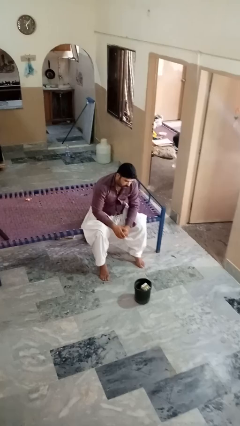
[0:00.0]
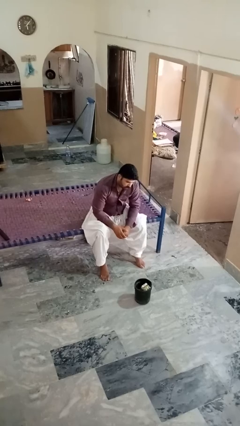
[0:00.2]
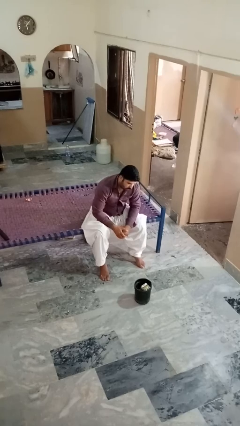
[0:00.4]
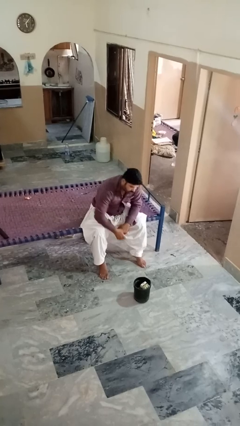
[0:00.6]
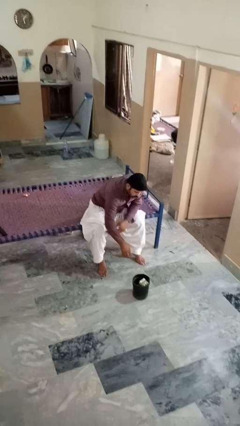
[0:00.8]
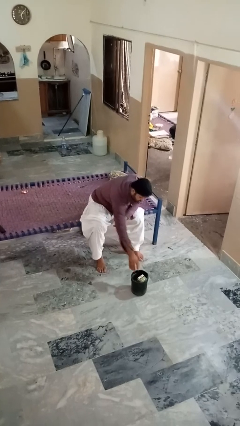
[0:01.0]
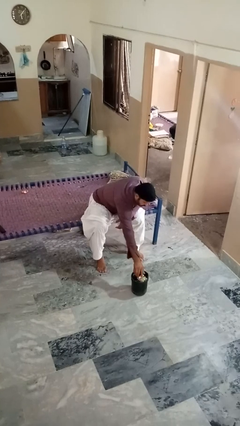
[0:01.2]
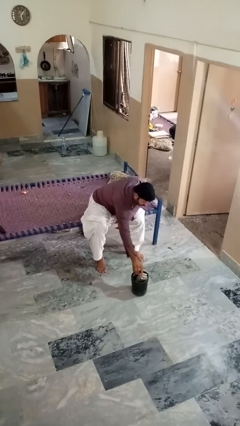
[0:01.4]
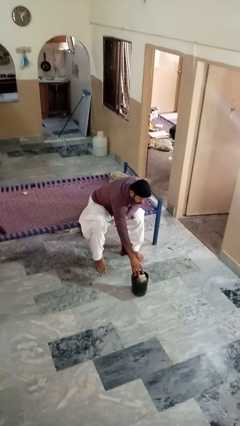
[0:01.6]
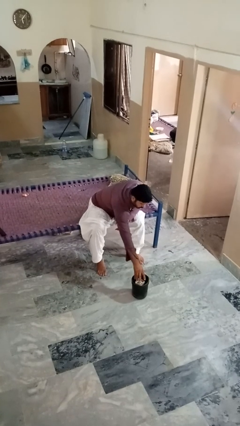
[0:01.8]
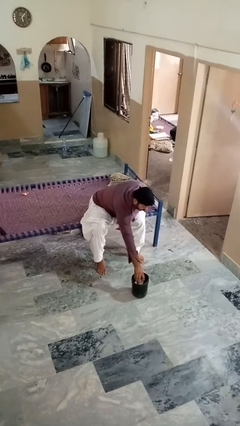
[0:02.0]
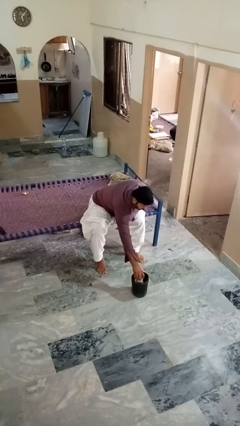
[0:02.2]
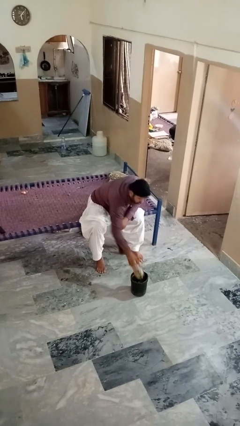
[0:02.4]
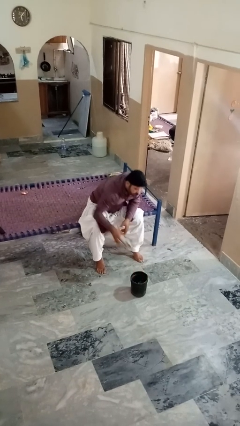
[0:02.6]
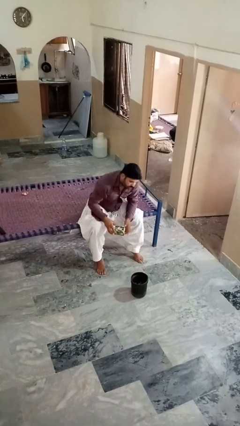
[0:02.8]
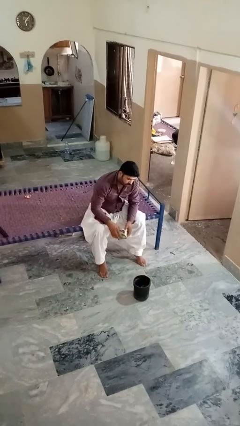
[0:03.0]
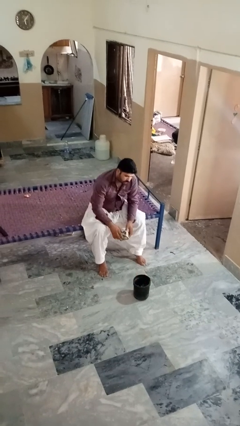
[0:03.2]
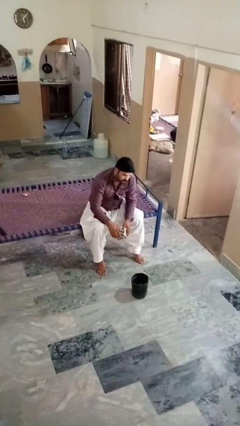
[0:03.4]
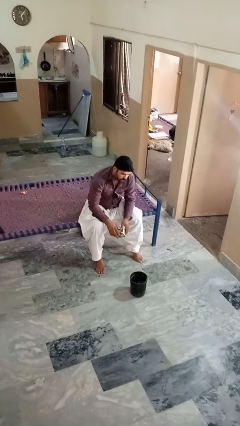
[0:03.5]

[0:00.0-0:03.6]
person takes object from basket

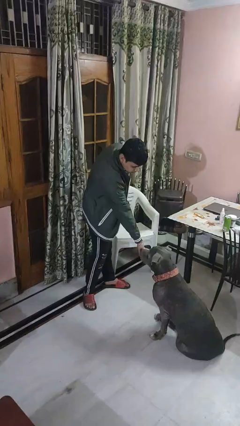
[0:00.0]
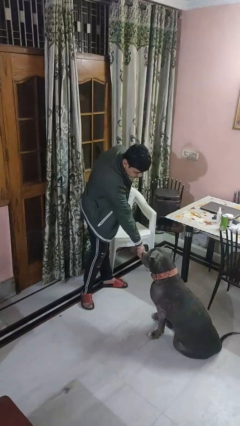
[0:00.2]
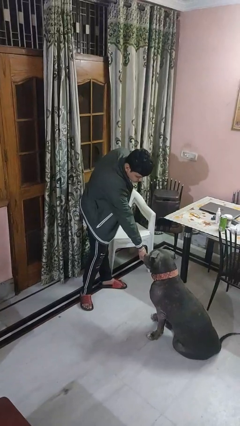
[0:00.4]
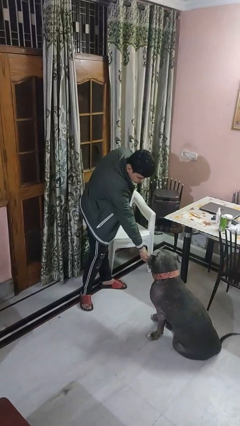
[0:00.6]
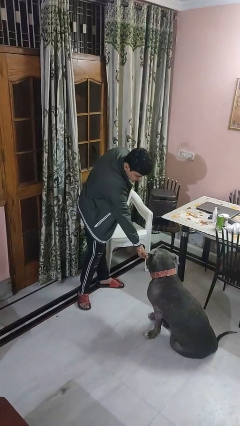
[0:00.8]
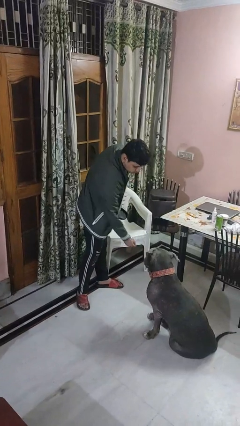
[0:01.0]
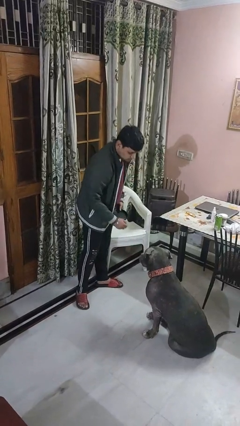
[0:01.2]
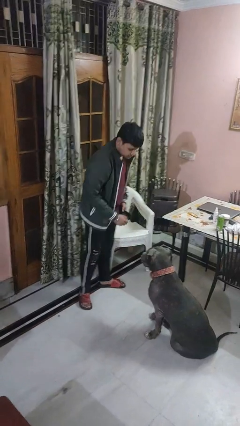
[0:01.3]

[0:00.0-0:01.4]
person feeds dog

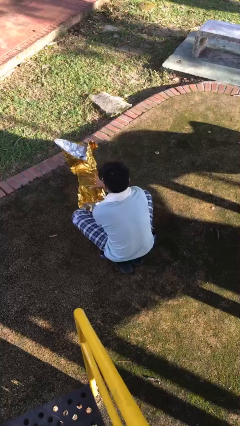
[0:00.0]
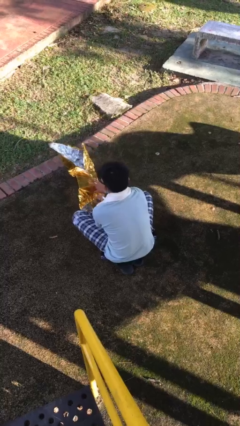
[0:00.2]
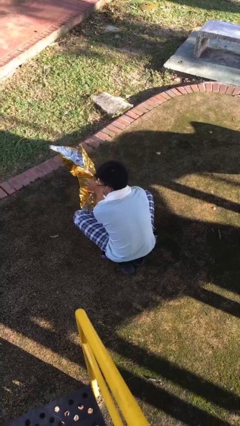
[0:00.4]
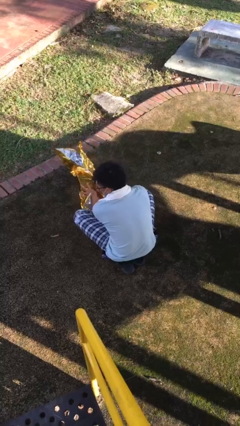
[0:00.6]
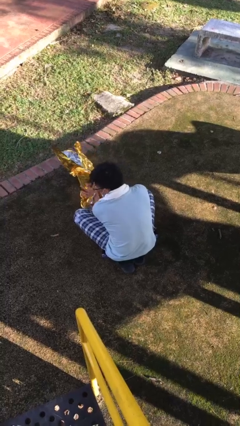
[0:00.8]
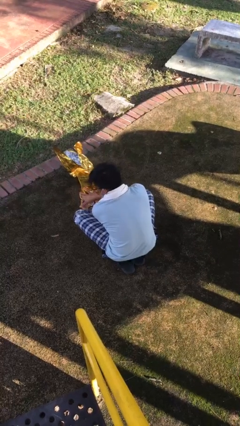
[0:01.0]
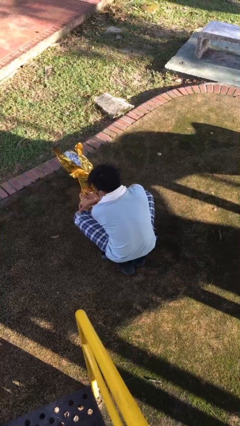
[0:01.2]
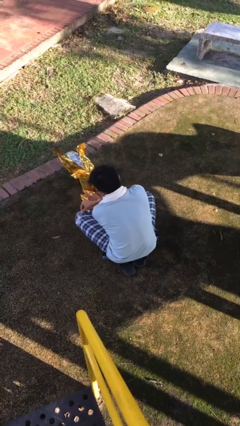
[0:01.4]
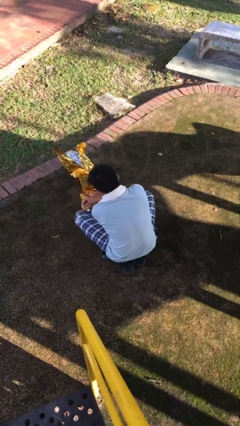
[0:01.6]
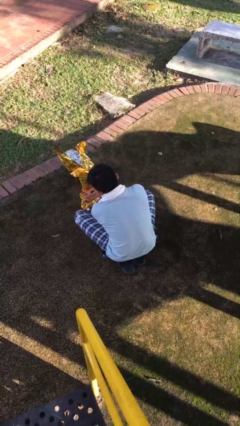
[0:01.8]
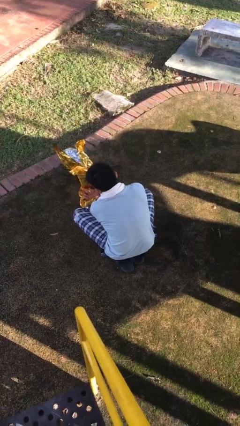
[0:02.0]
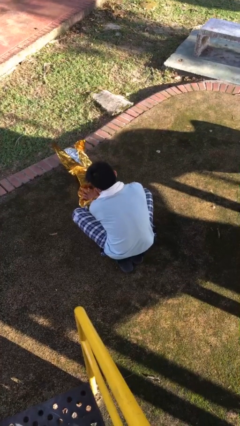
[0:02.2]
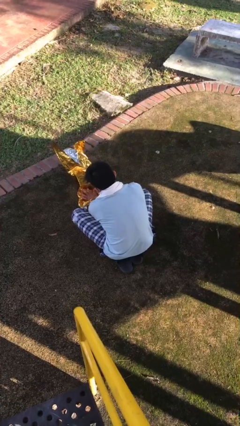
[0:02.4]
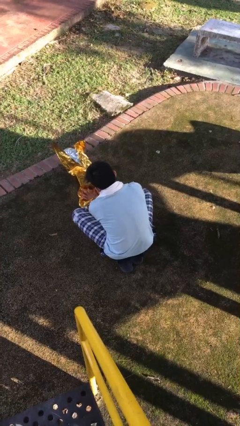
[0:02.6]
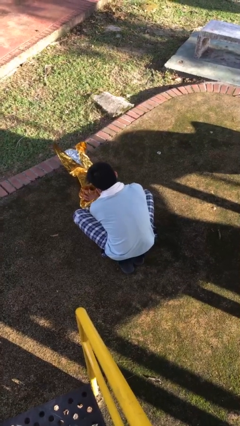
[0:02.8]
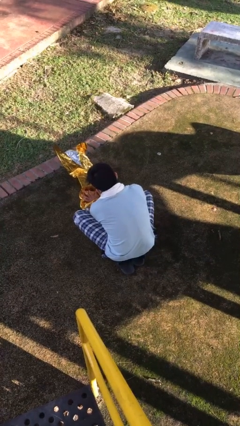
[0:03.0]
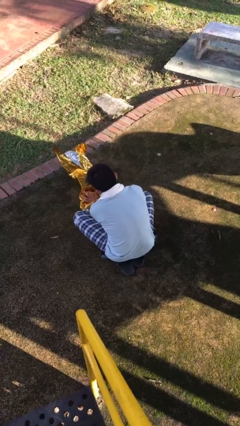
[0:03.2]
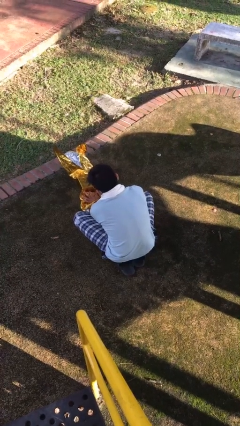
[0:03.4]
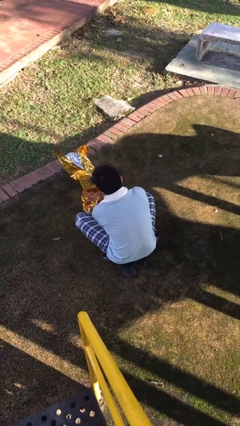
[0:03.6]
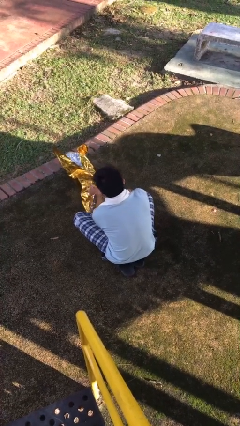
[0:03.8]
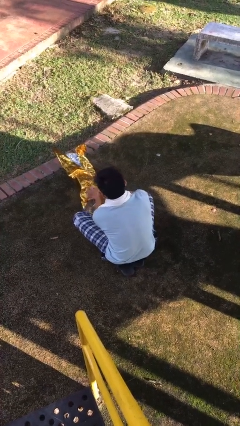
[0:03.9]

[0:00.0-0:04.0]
person wraps box

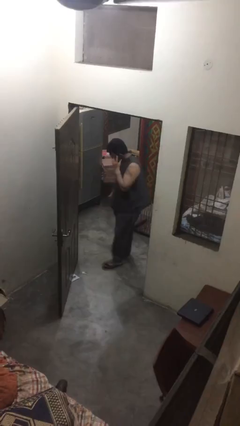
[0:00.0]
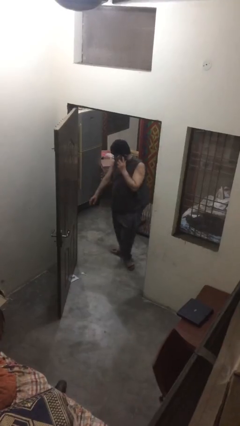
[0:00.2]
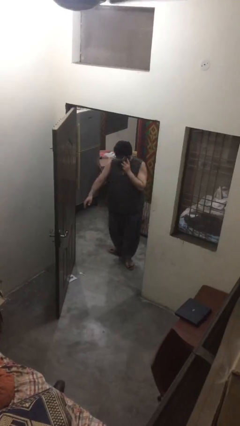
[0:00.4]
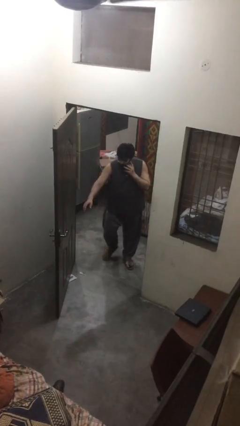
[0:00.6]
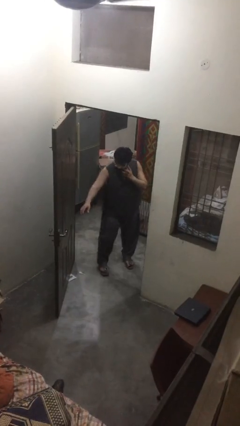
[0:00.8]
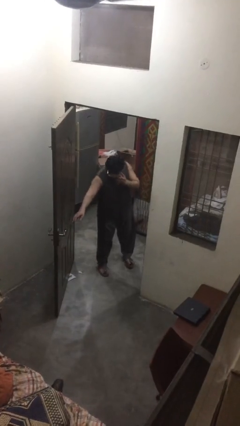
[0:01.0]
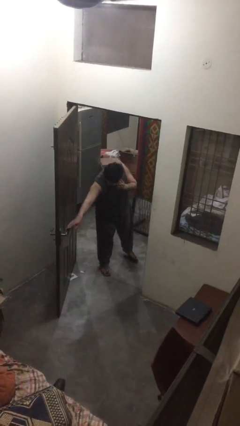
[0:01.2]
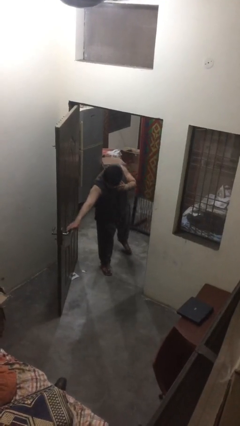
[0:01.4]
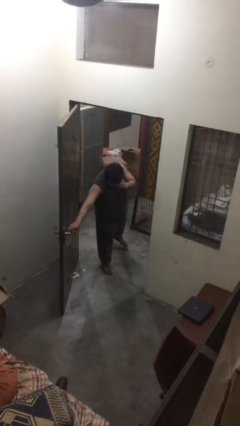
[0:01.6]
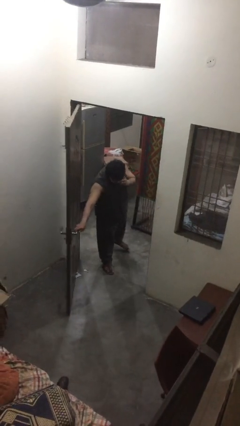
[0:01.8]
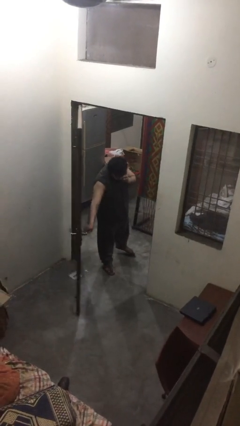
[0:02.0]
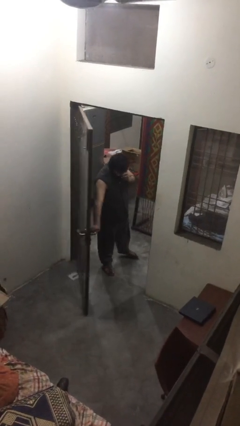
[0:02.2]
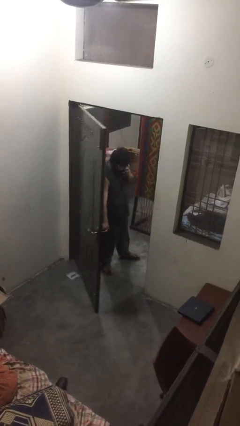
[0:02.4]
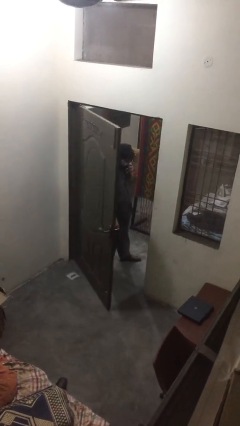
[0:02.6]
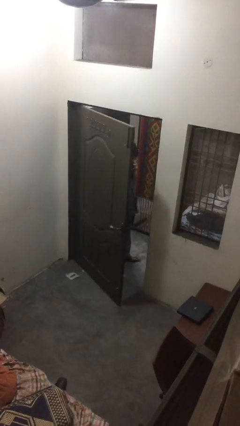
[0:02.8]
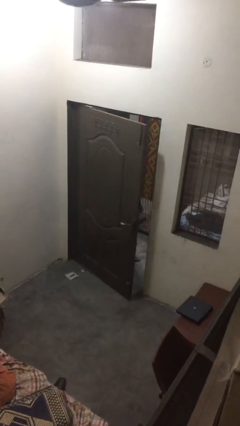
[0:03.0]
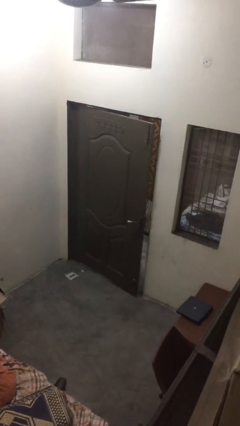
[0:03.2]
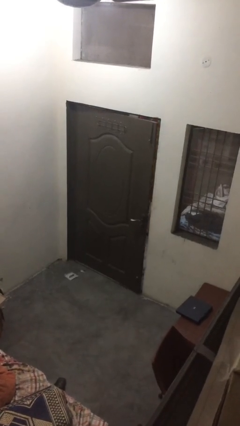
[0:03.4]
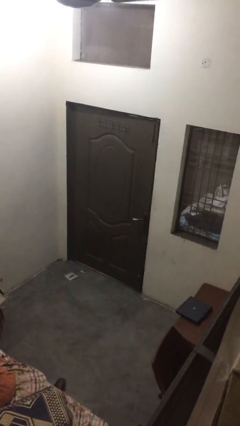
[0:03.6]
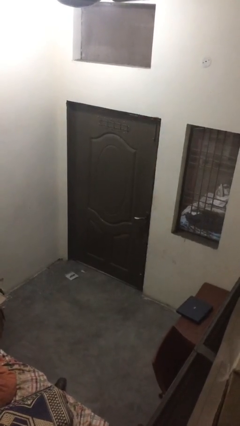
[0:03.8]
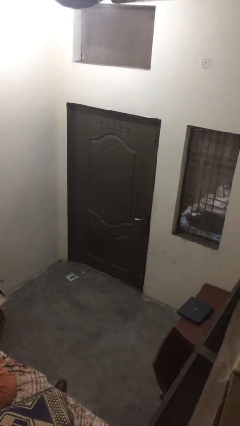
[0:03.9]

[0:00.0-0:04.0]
person closes facility door

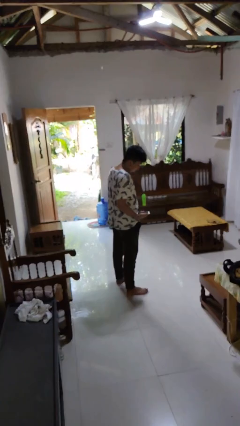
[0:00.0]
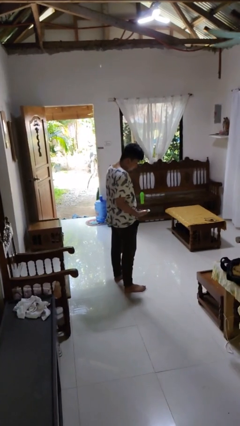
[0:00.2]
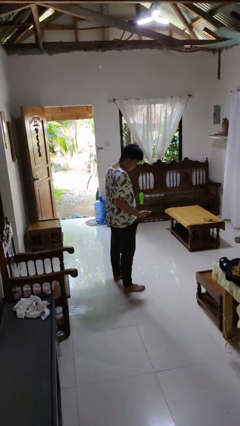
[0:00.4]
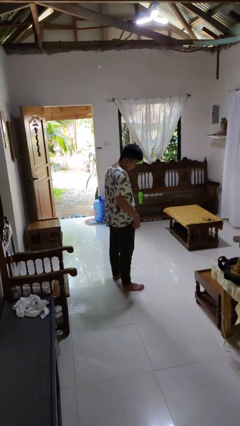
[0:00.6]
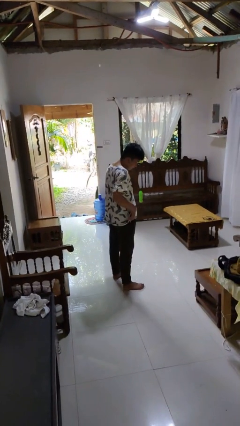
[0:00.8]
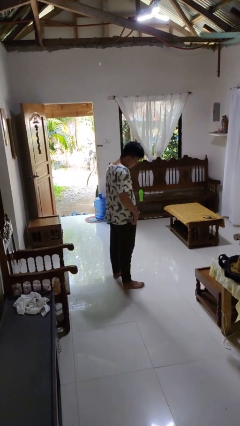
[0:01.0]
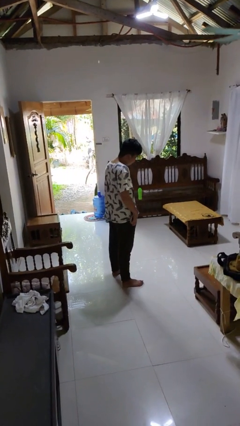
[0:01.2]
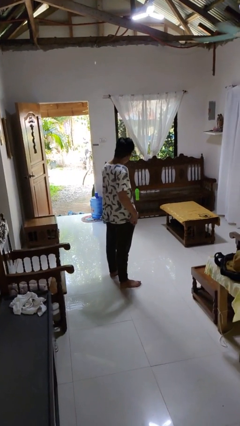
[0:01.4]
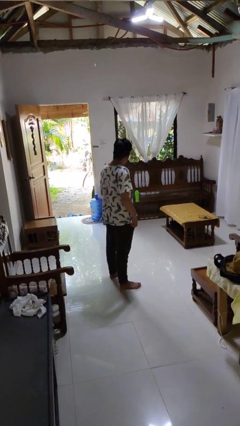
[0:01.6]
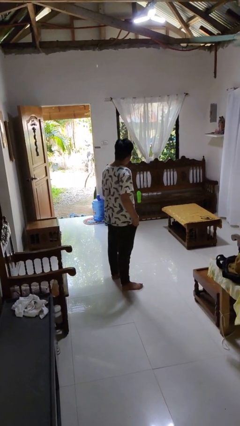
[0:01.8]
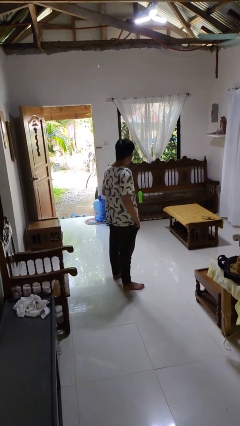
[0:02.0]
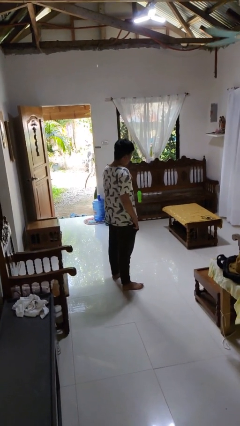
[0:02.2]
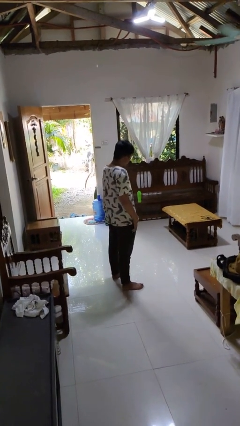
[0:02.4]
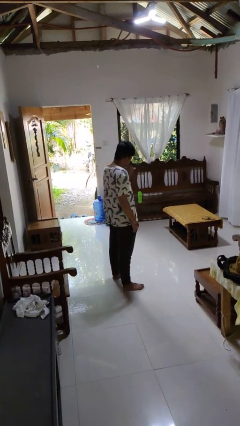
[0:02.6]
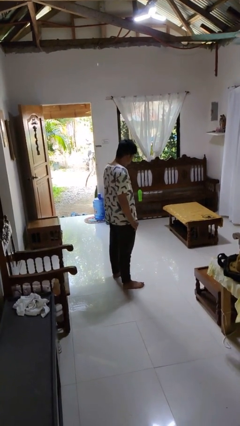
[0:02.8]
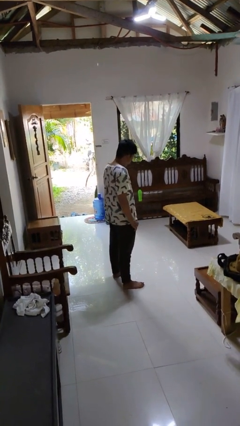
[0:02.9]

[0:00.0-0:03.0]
person puts phone into pocket

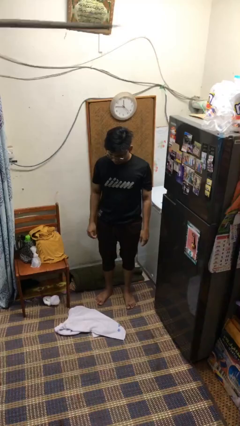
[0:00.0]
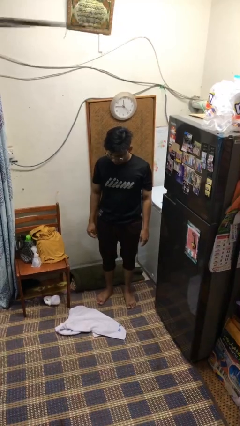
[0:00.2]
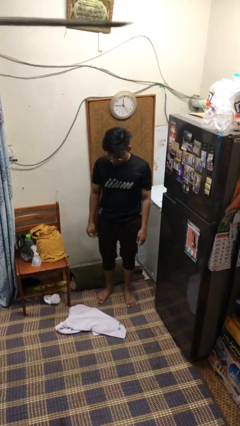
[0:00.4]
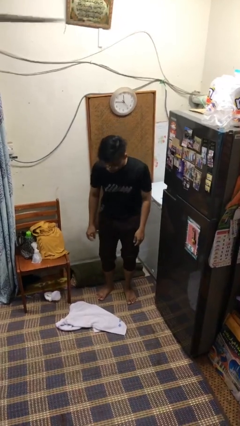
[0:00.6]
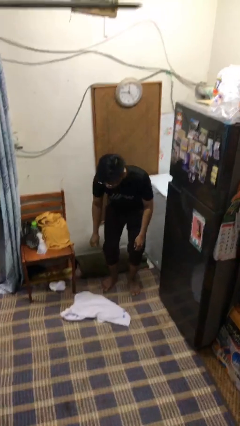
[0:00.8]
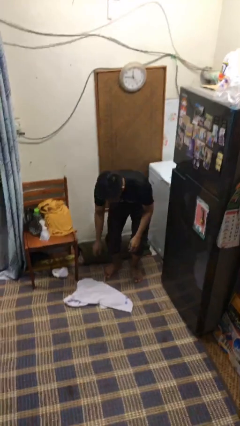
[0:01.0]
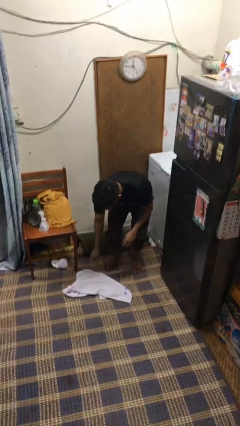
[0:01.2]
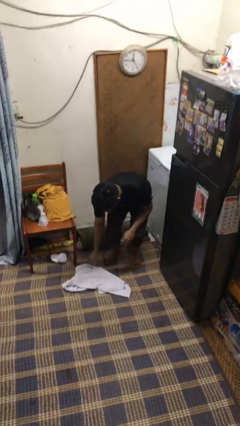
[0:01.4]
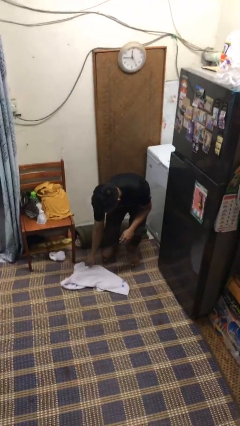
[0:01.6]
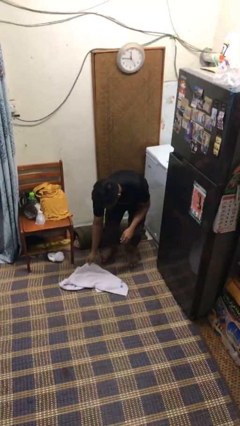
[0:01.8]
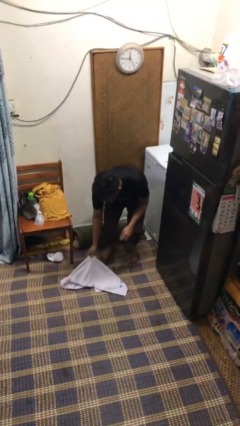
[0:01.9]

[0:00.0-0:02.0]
person picks up object from floor
